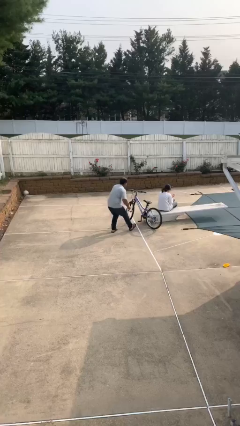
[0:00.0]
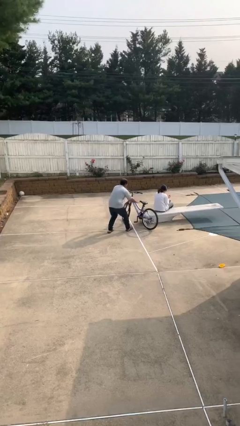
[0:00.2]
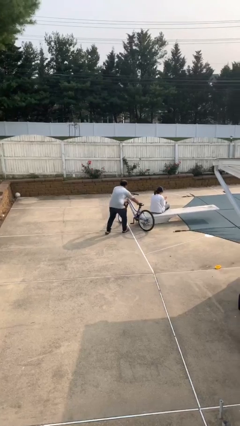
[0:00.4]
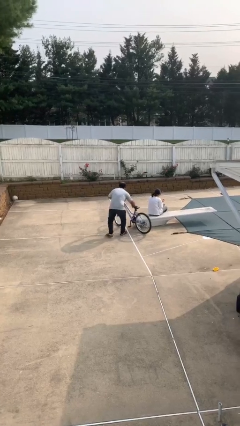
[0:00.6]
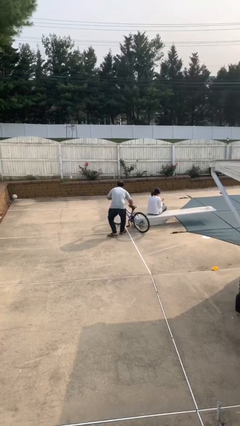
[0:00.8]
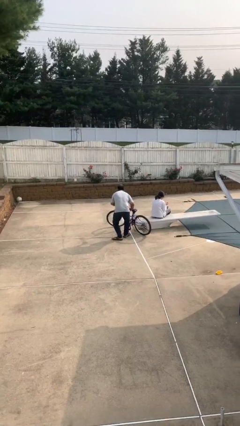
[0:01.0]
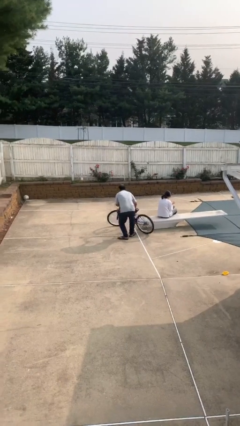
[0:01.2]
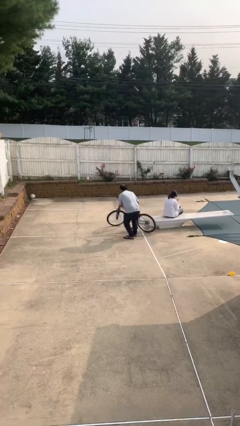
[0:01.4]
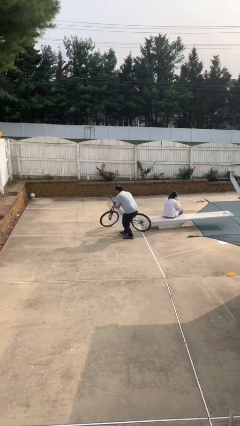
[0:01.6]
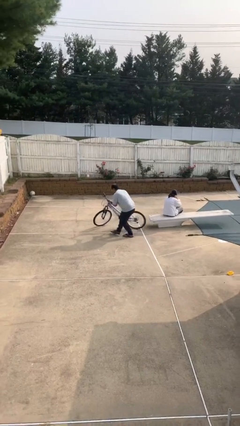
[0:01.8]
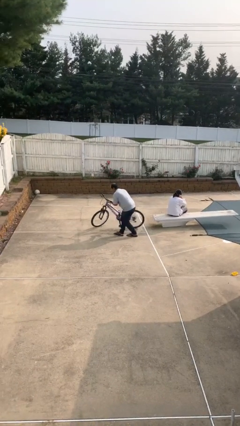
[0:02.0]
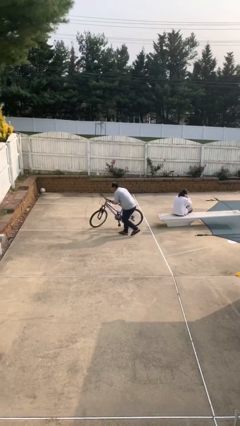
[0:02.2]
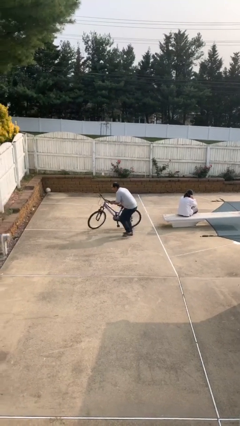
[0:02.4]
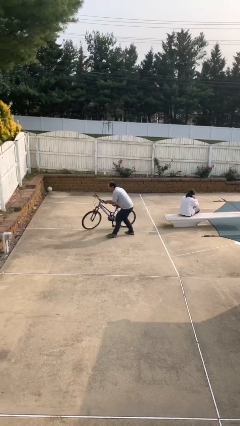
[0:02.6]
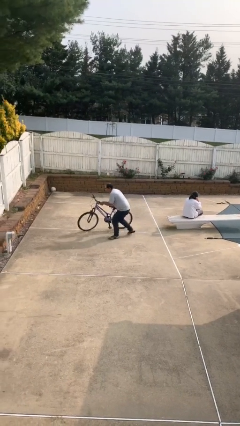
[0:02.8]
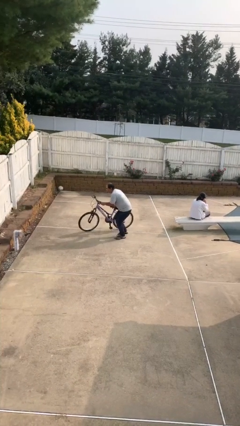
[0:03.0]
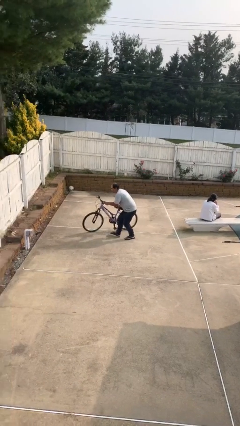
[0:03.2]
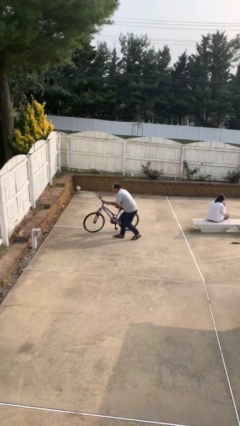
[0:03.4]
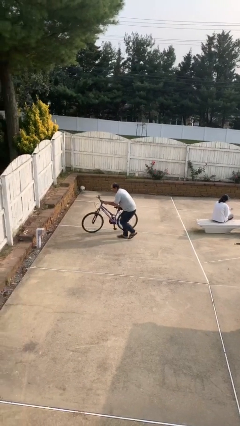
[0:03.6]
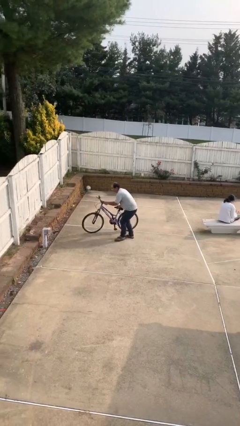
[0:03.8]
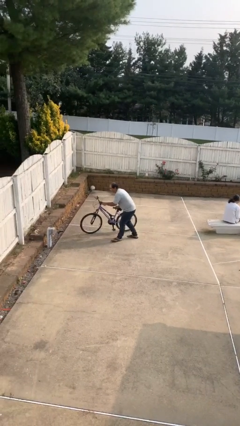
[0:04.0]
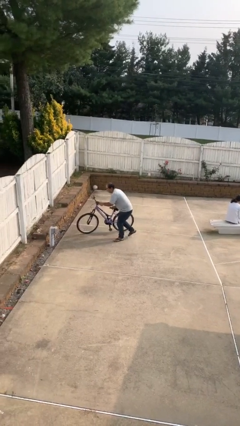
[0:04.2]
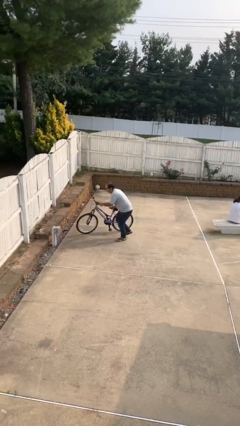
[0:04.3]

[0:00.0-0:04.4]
person steals object from person

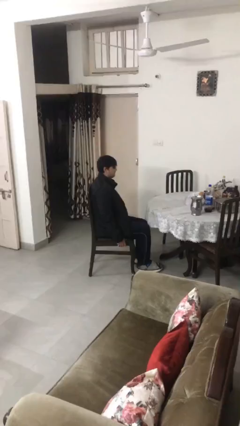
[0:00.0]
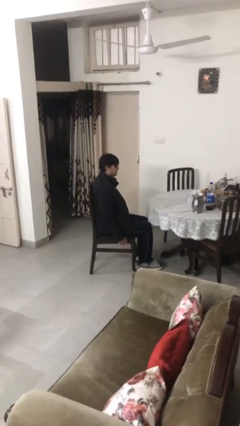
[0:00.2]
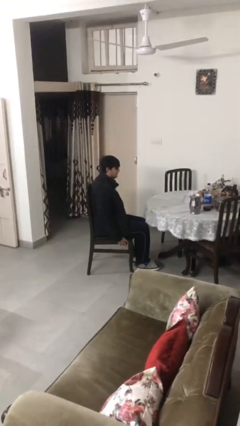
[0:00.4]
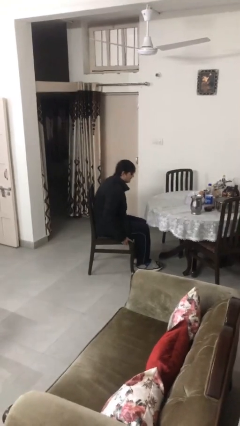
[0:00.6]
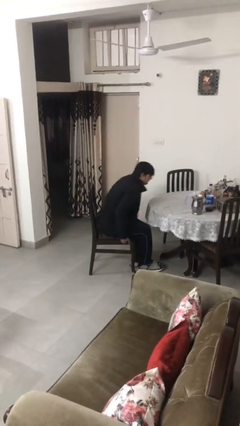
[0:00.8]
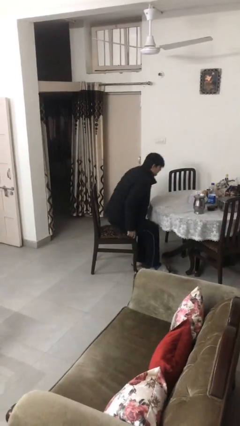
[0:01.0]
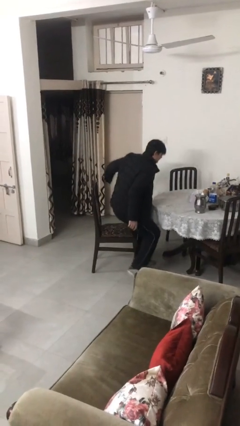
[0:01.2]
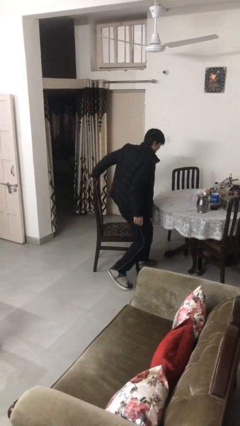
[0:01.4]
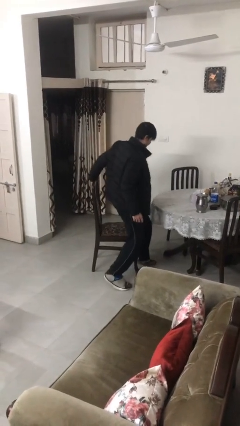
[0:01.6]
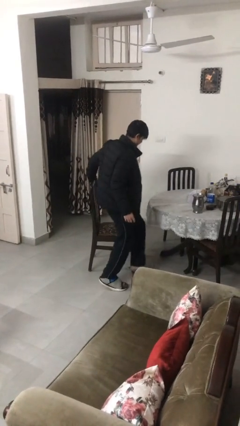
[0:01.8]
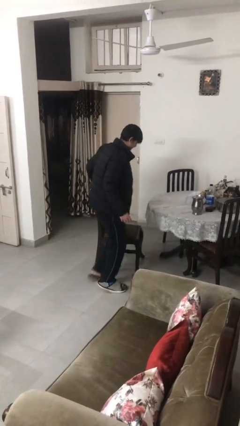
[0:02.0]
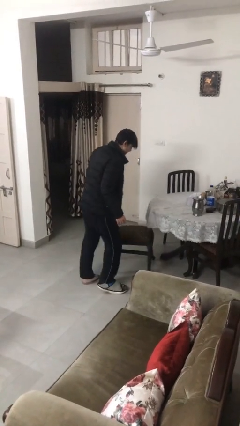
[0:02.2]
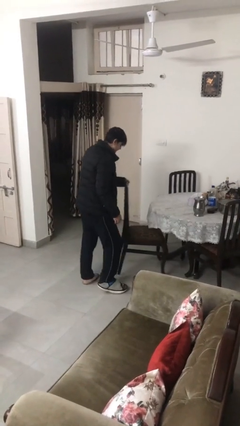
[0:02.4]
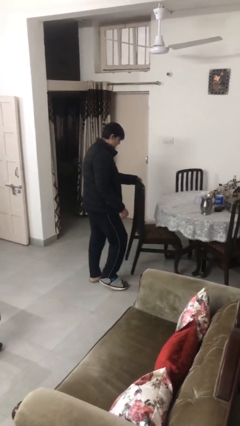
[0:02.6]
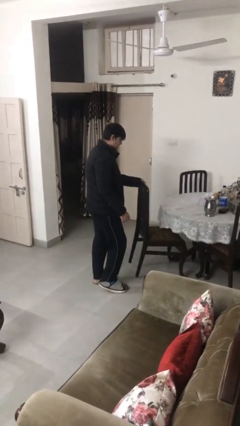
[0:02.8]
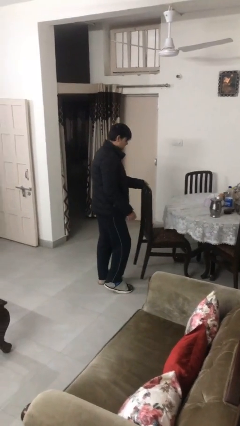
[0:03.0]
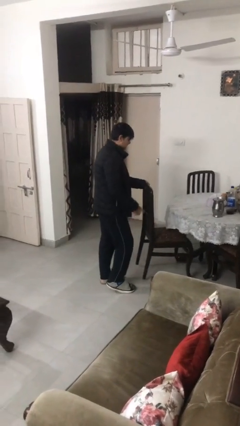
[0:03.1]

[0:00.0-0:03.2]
person stands up

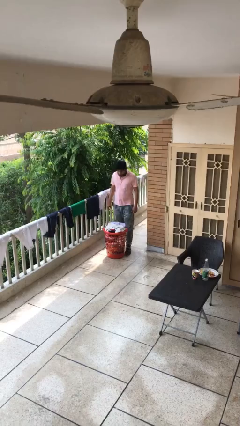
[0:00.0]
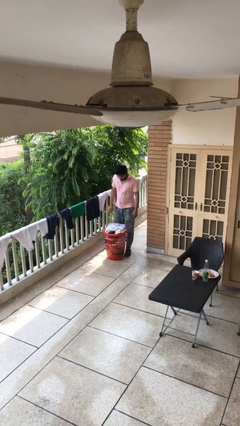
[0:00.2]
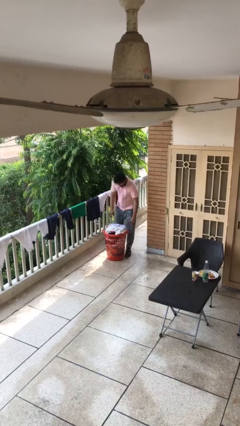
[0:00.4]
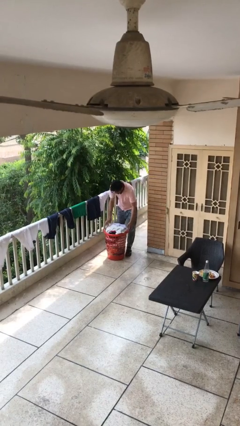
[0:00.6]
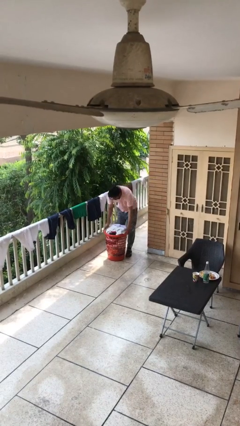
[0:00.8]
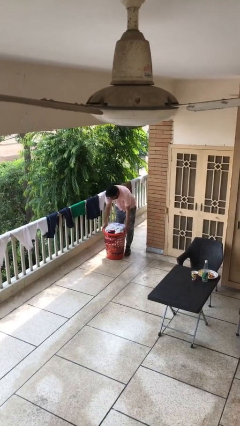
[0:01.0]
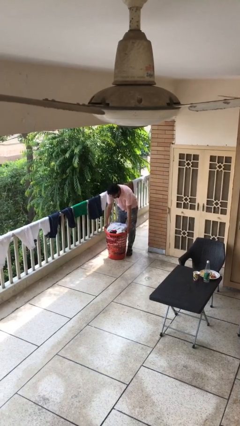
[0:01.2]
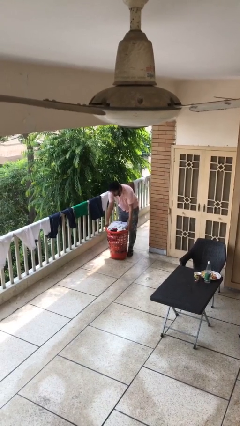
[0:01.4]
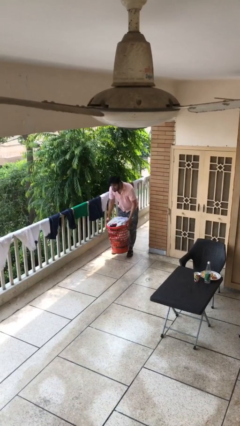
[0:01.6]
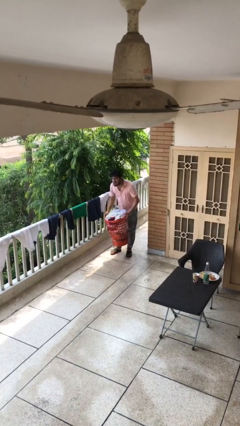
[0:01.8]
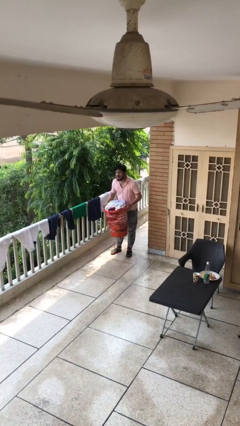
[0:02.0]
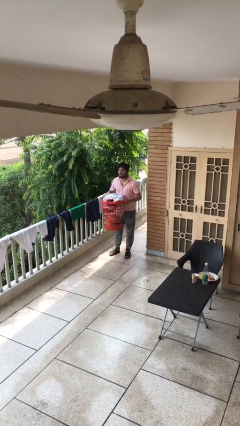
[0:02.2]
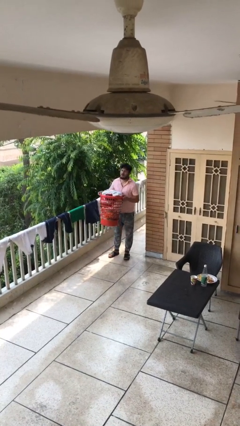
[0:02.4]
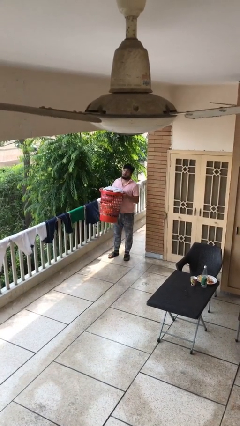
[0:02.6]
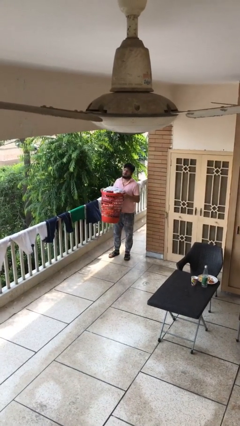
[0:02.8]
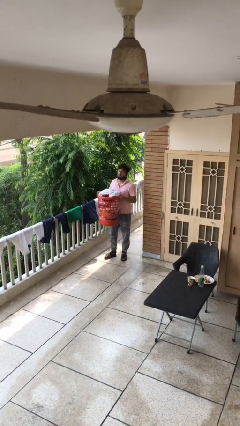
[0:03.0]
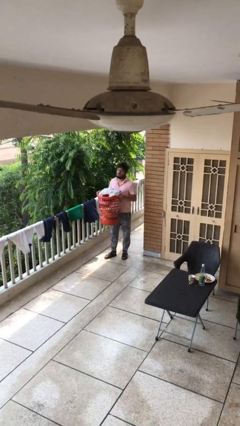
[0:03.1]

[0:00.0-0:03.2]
person picks up object from floor

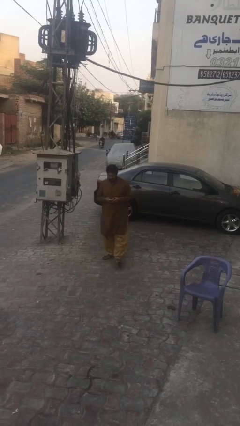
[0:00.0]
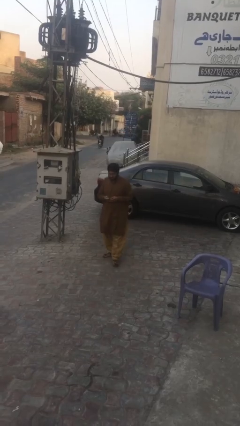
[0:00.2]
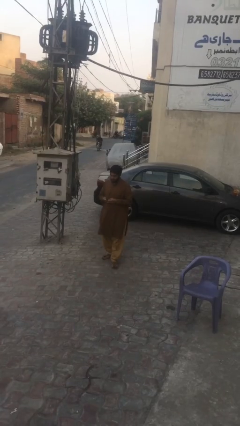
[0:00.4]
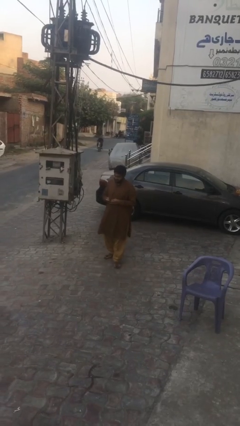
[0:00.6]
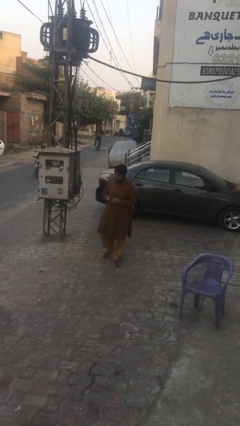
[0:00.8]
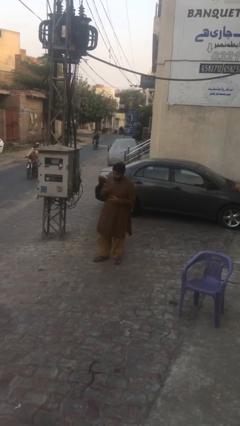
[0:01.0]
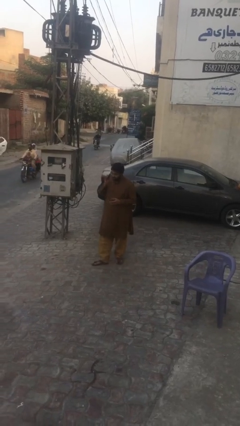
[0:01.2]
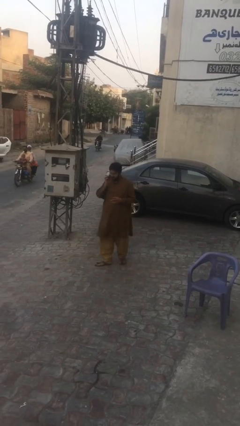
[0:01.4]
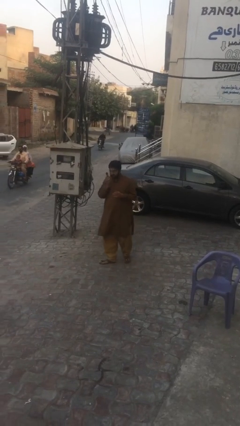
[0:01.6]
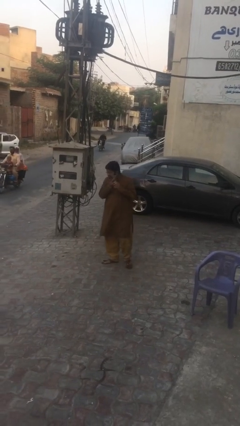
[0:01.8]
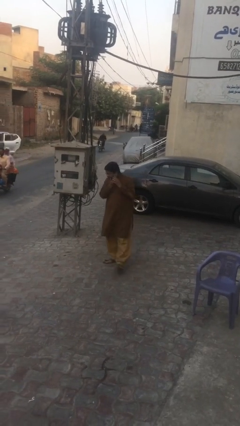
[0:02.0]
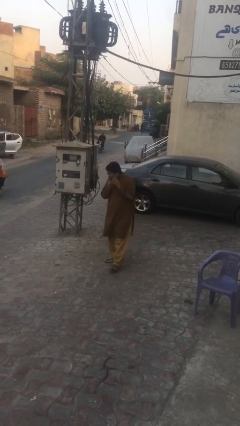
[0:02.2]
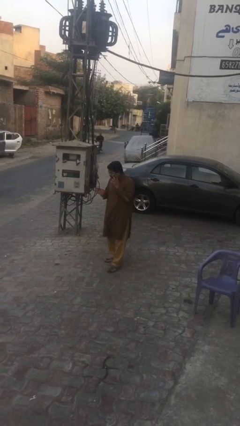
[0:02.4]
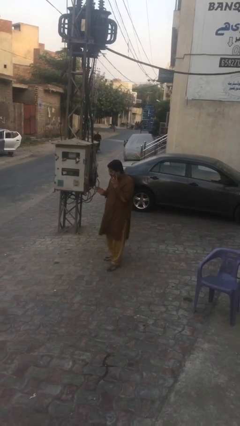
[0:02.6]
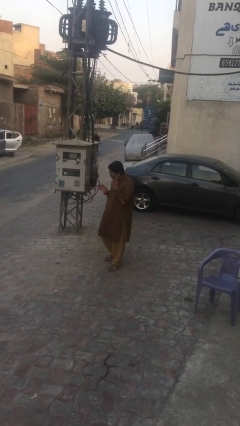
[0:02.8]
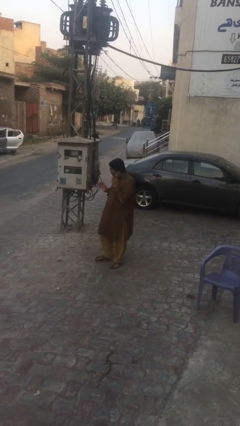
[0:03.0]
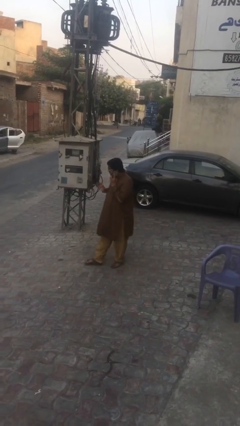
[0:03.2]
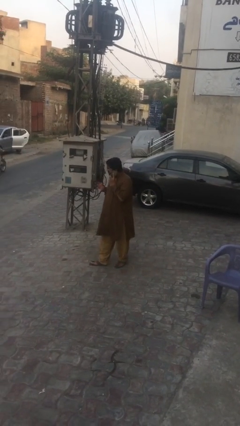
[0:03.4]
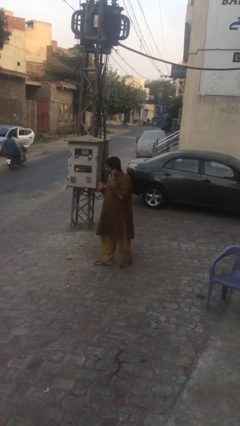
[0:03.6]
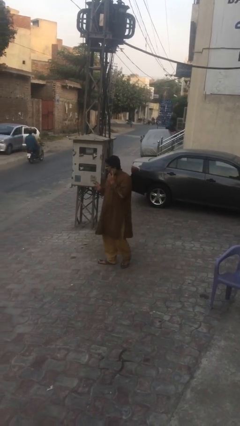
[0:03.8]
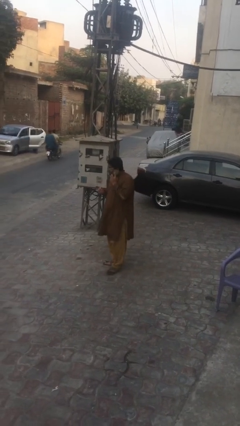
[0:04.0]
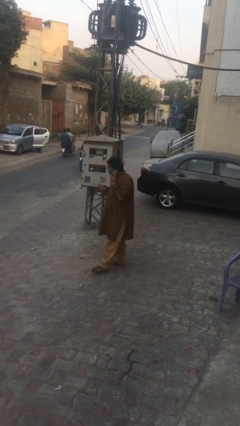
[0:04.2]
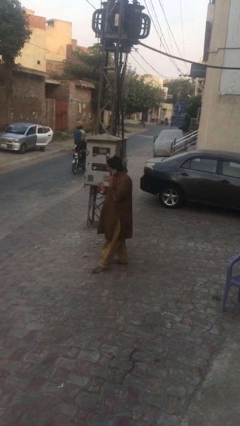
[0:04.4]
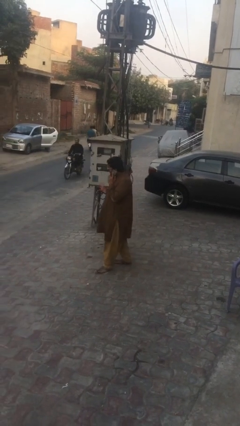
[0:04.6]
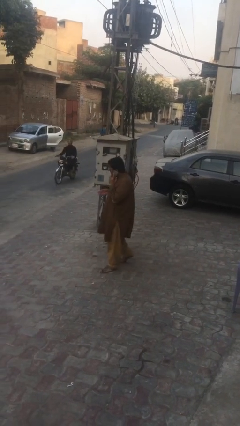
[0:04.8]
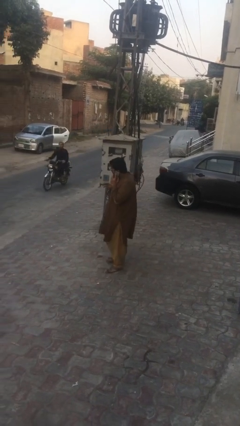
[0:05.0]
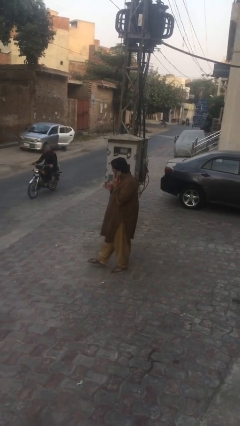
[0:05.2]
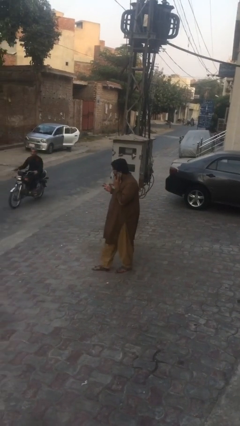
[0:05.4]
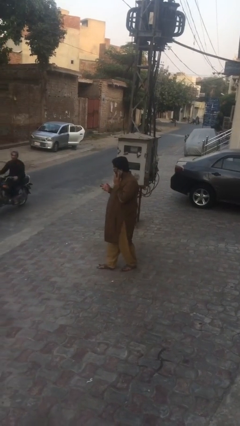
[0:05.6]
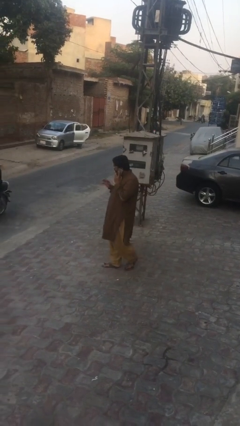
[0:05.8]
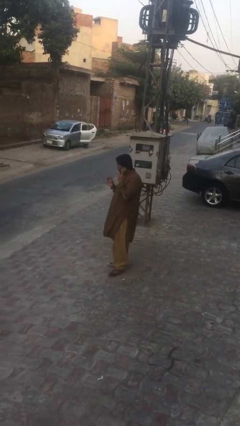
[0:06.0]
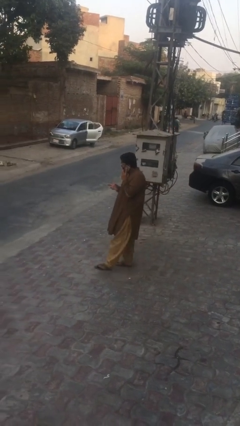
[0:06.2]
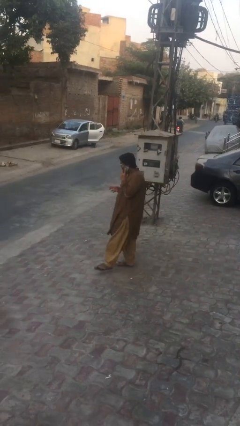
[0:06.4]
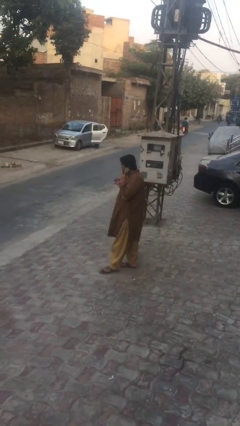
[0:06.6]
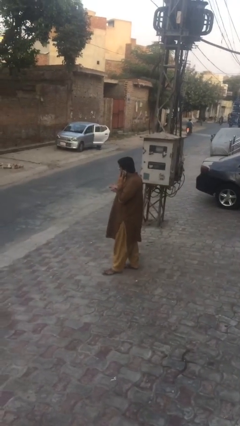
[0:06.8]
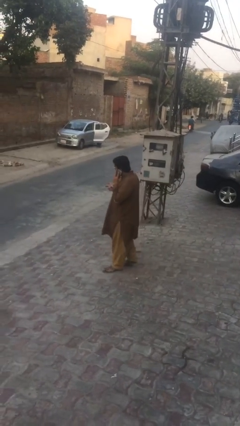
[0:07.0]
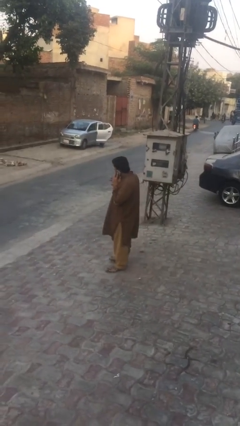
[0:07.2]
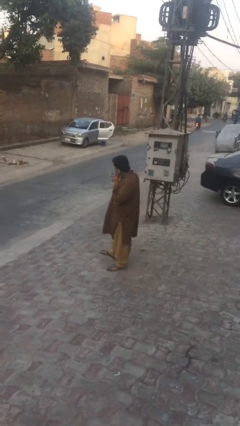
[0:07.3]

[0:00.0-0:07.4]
person talks on phone
